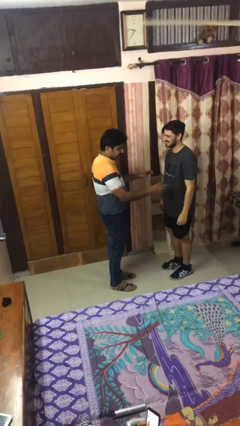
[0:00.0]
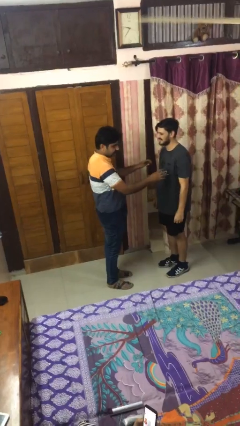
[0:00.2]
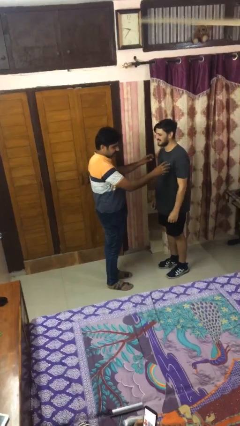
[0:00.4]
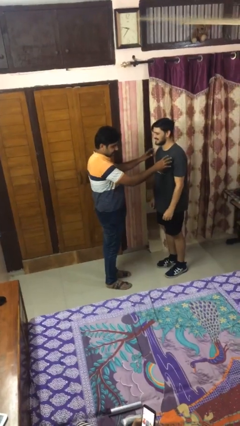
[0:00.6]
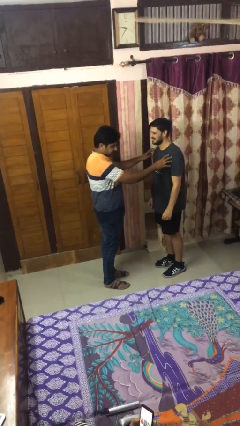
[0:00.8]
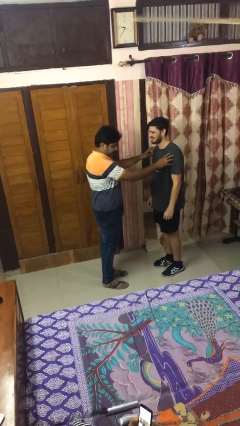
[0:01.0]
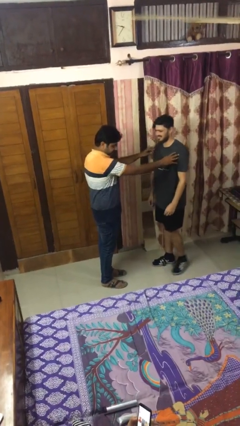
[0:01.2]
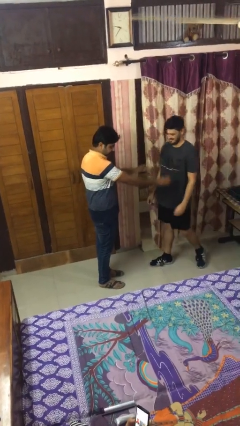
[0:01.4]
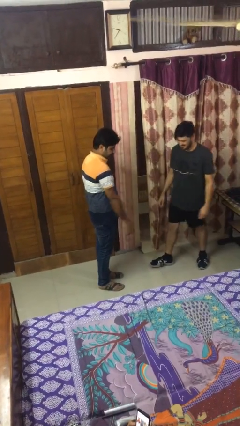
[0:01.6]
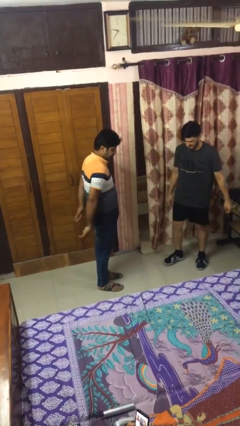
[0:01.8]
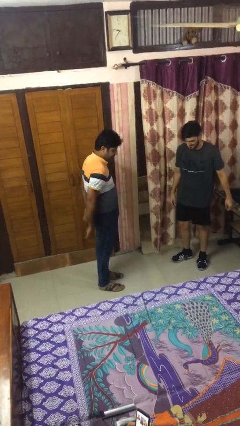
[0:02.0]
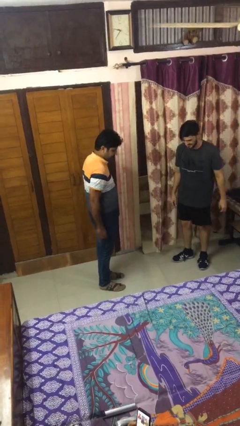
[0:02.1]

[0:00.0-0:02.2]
person shoves person

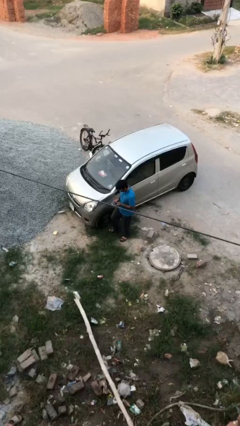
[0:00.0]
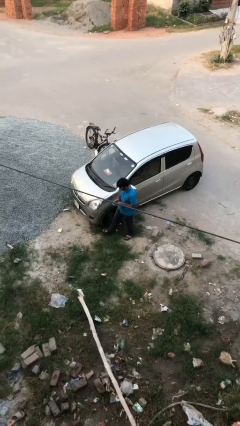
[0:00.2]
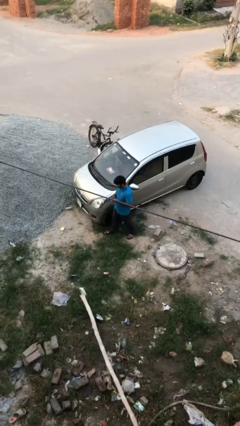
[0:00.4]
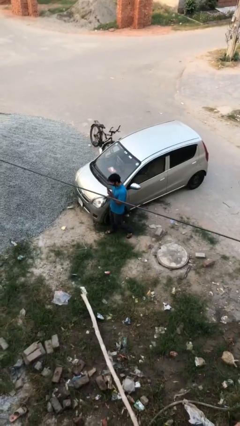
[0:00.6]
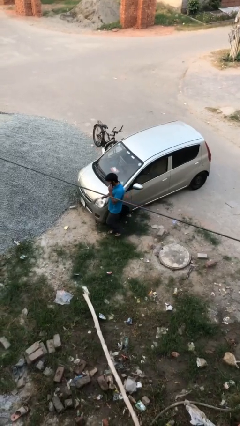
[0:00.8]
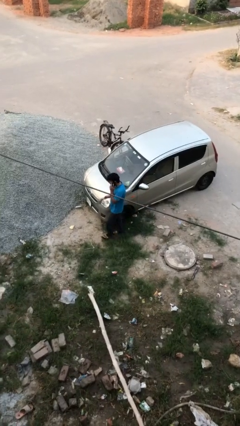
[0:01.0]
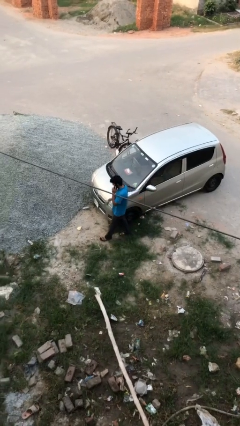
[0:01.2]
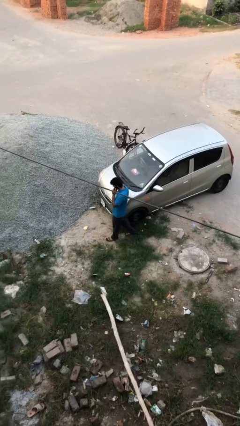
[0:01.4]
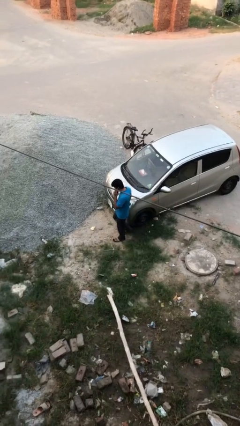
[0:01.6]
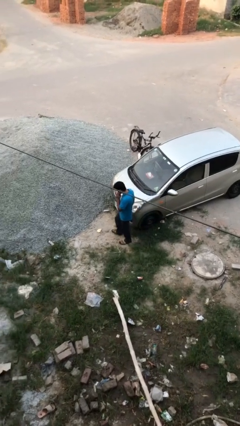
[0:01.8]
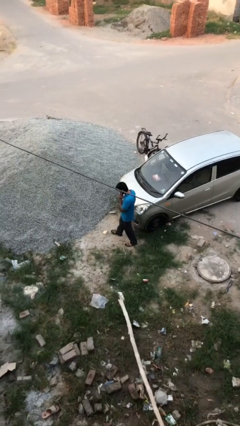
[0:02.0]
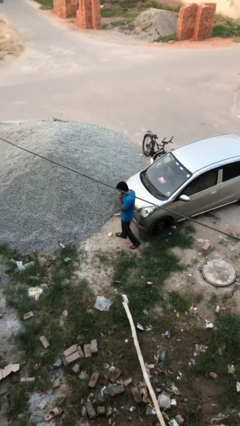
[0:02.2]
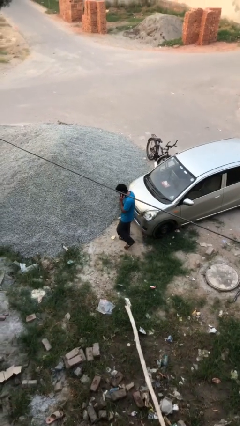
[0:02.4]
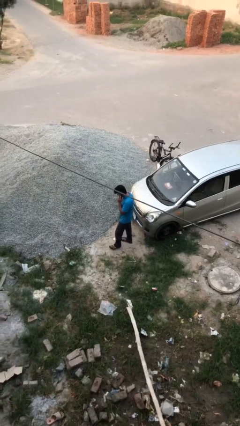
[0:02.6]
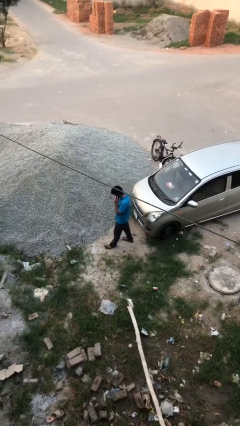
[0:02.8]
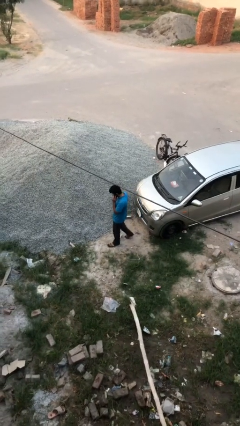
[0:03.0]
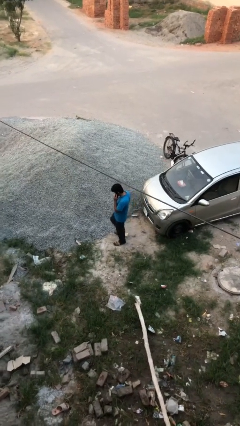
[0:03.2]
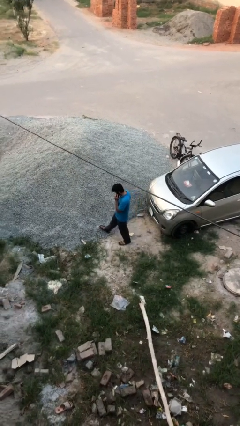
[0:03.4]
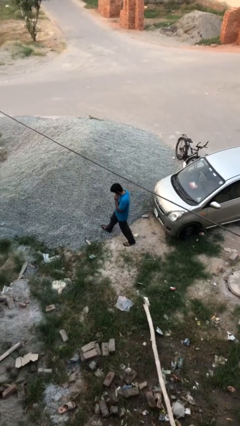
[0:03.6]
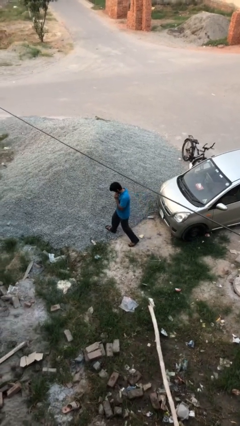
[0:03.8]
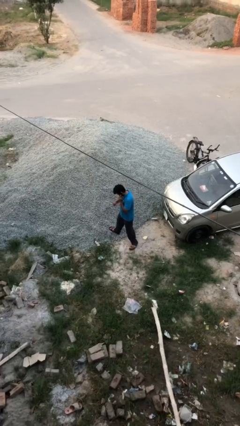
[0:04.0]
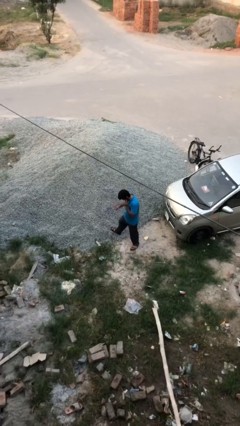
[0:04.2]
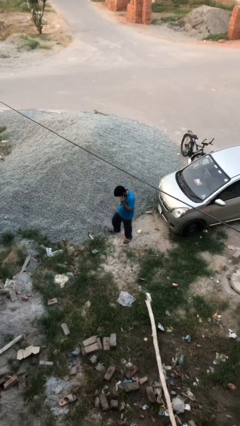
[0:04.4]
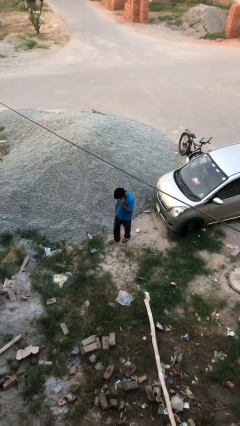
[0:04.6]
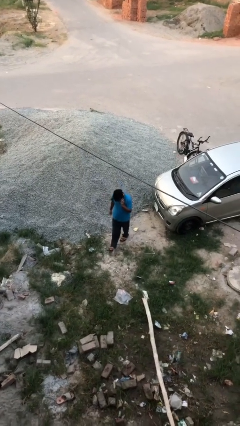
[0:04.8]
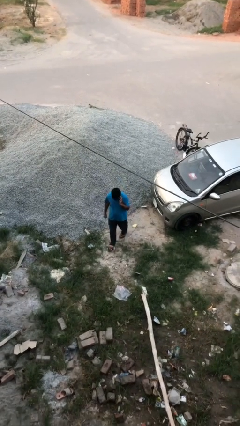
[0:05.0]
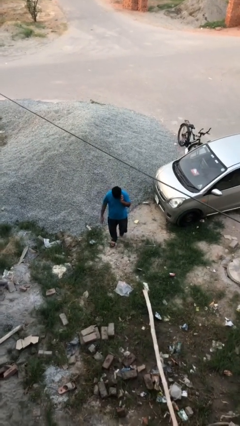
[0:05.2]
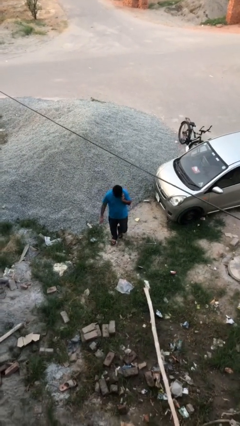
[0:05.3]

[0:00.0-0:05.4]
person talks on phone

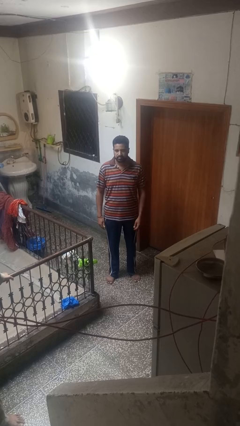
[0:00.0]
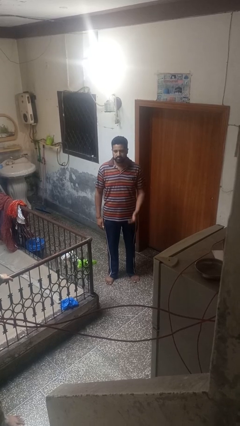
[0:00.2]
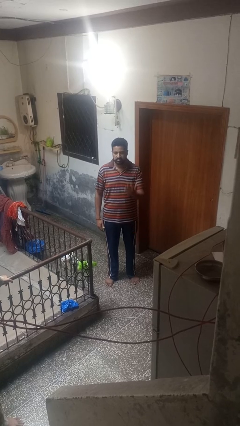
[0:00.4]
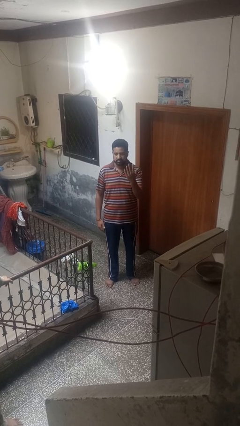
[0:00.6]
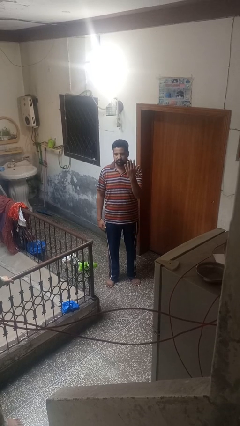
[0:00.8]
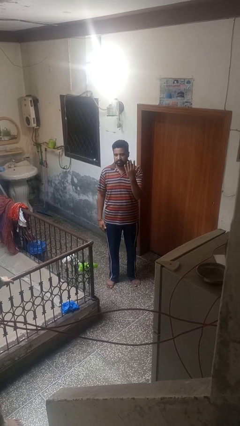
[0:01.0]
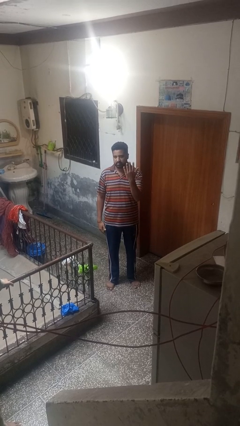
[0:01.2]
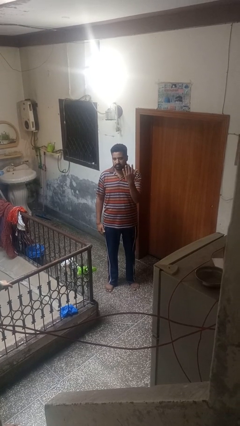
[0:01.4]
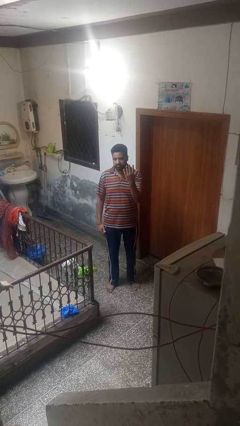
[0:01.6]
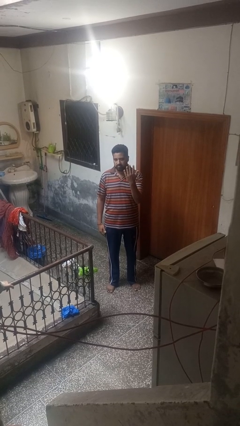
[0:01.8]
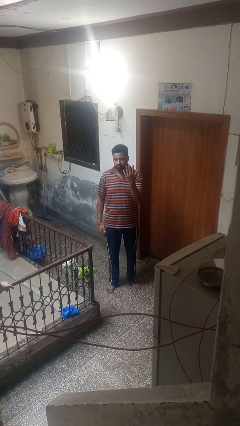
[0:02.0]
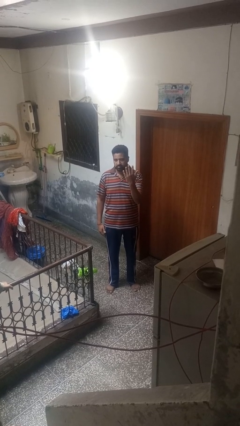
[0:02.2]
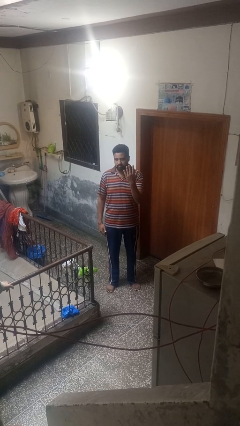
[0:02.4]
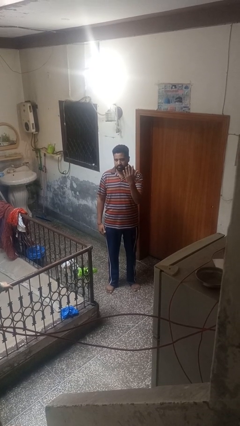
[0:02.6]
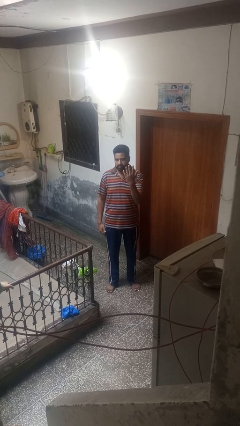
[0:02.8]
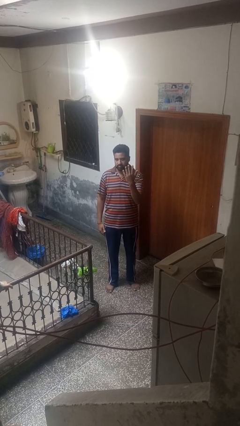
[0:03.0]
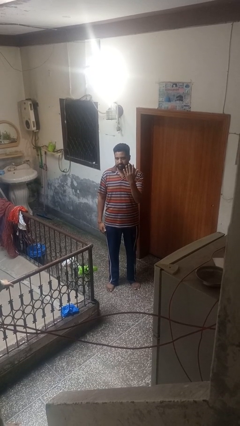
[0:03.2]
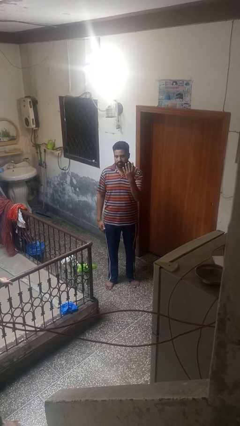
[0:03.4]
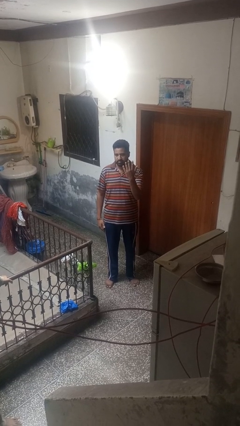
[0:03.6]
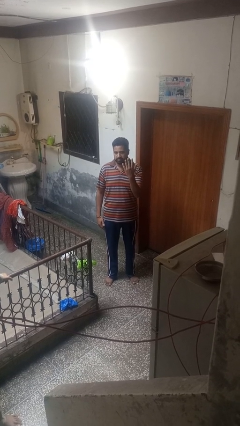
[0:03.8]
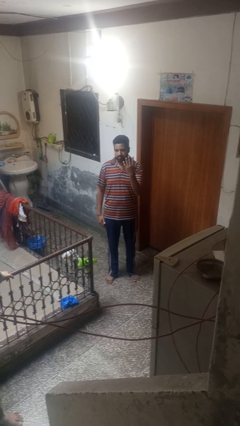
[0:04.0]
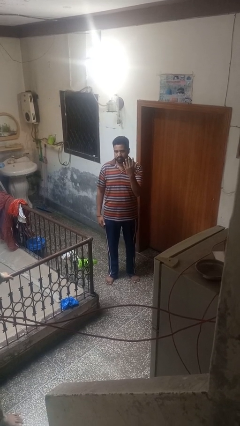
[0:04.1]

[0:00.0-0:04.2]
person gestures number five

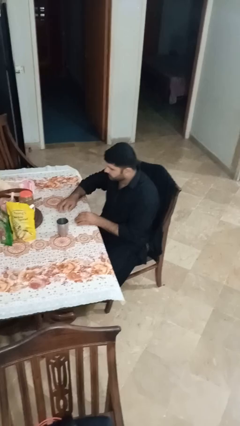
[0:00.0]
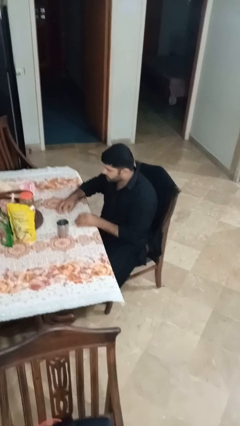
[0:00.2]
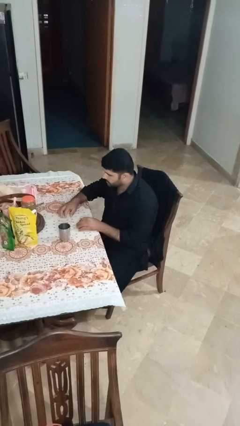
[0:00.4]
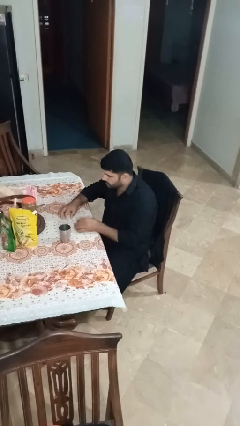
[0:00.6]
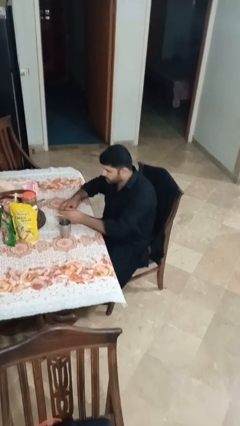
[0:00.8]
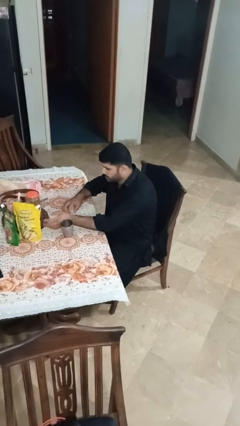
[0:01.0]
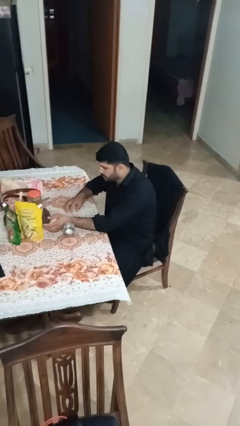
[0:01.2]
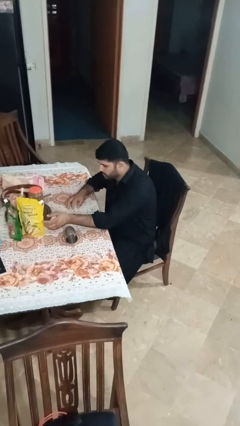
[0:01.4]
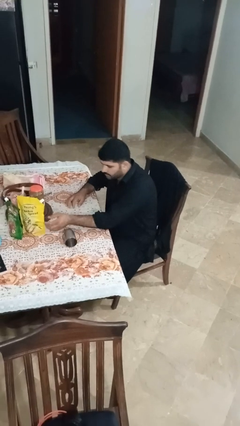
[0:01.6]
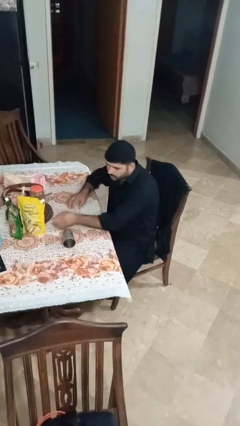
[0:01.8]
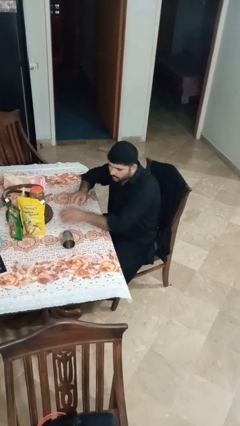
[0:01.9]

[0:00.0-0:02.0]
person knocks over glass

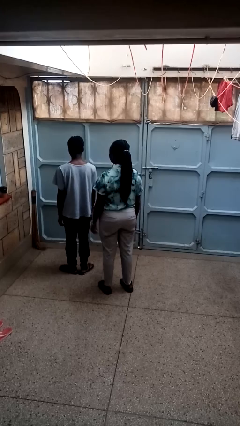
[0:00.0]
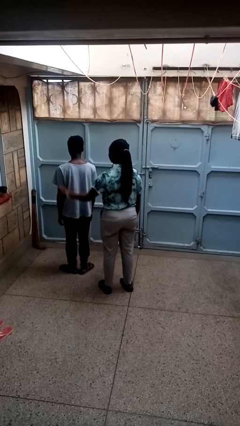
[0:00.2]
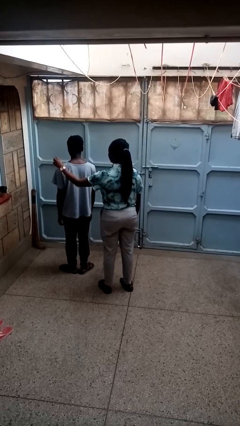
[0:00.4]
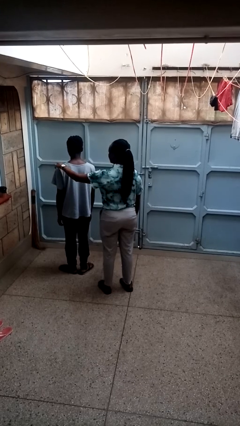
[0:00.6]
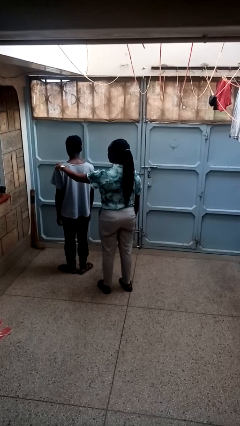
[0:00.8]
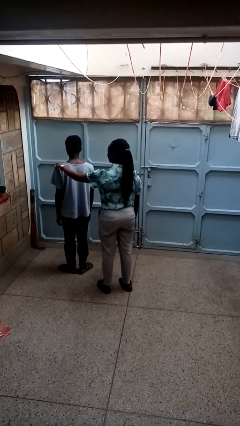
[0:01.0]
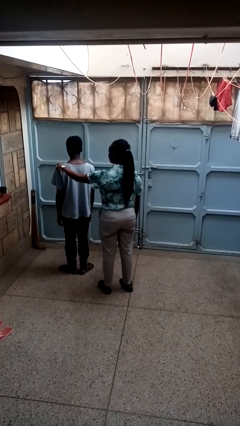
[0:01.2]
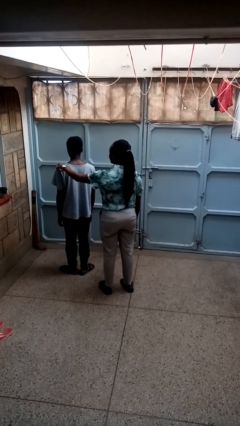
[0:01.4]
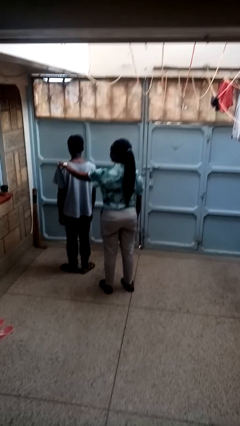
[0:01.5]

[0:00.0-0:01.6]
person grabs person by shoulder

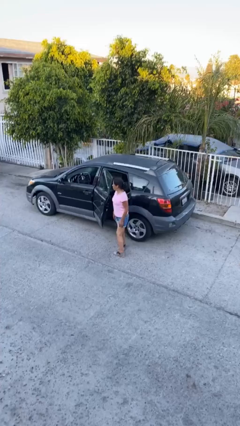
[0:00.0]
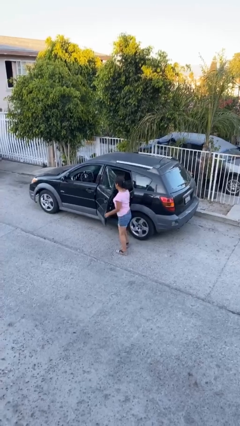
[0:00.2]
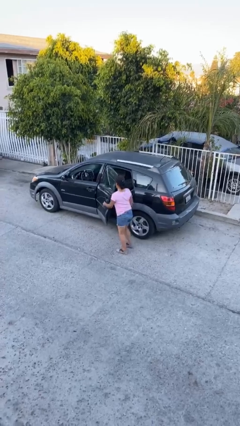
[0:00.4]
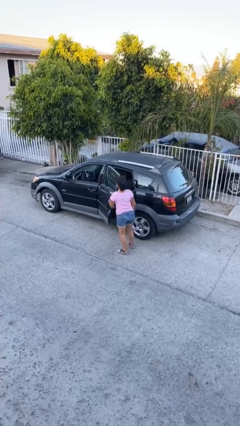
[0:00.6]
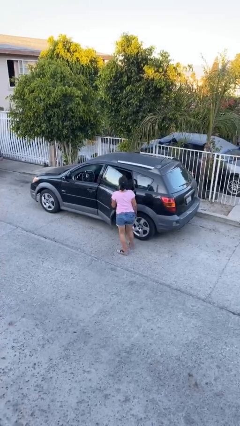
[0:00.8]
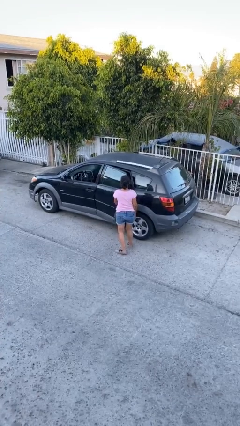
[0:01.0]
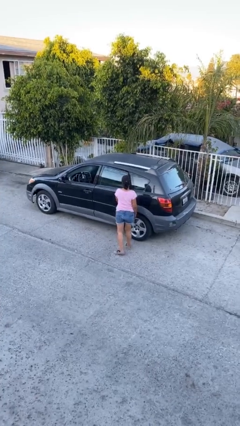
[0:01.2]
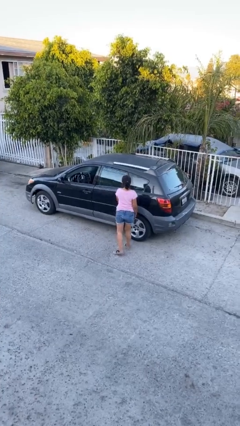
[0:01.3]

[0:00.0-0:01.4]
person closes car door

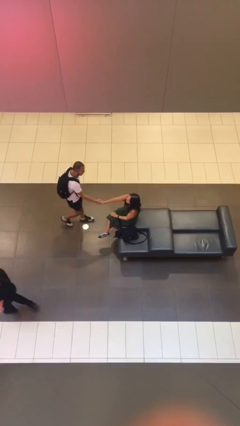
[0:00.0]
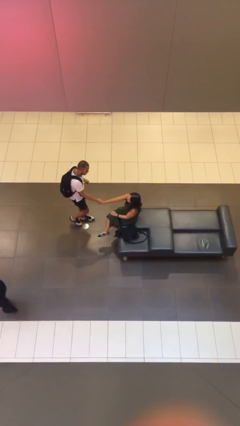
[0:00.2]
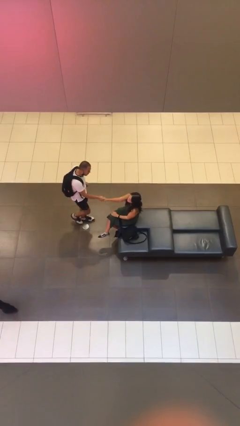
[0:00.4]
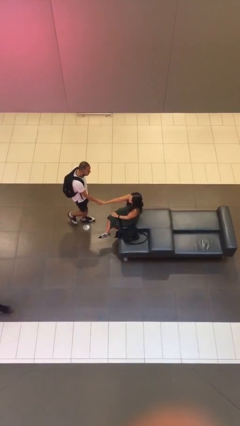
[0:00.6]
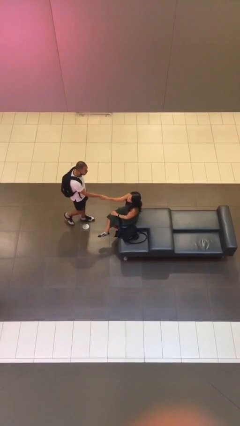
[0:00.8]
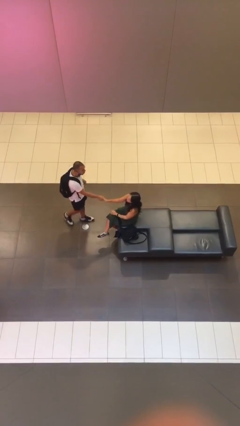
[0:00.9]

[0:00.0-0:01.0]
person shakes hand
